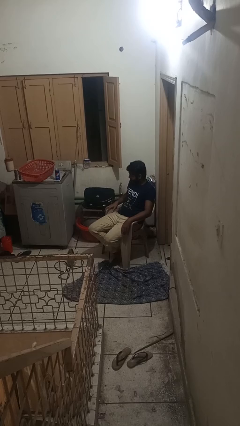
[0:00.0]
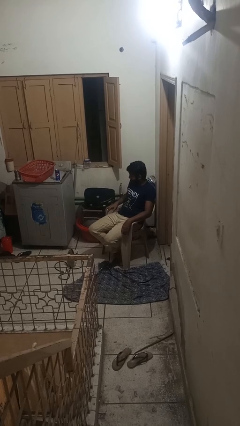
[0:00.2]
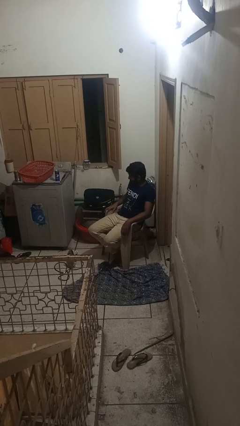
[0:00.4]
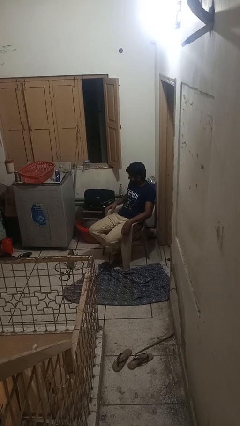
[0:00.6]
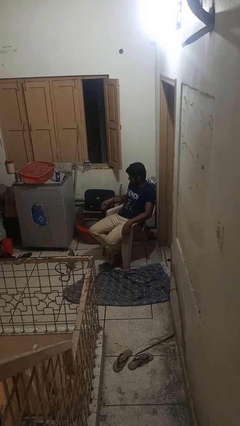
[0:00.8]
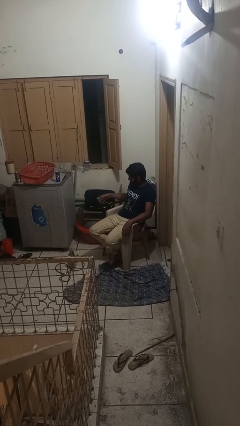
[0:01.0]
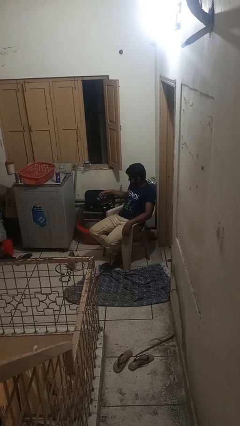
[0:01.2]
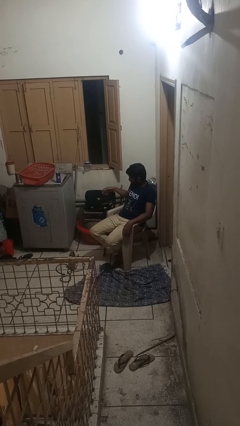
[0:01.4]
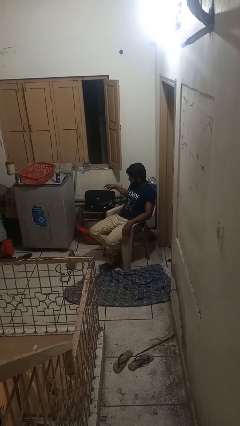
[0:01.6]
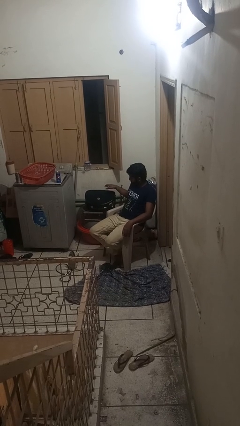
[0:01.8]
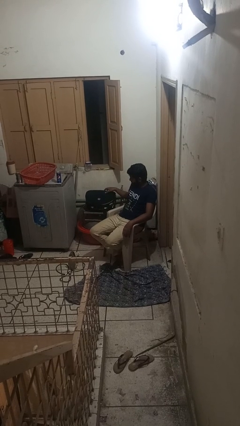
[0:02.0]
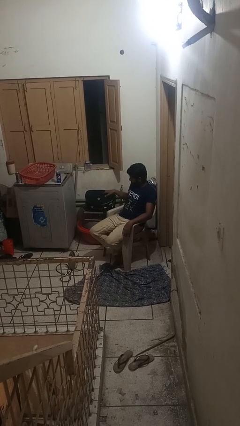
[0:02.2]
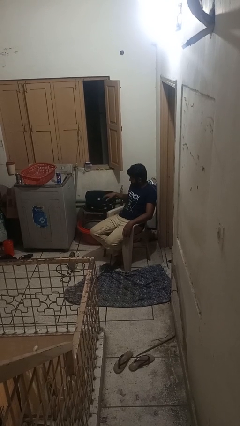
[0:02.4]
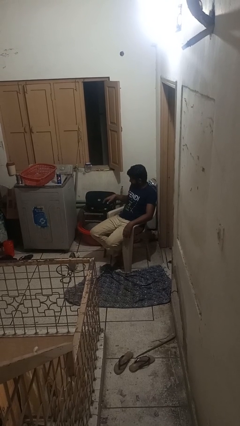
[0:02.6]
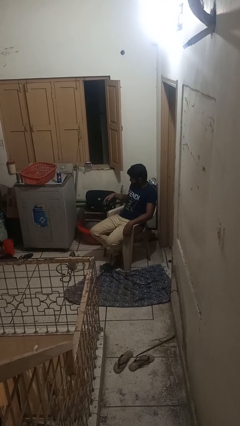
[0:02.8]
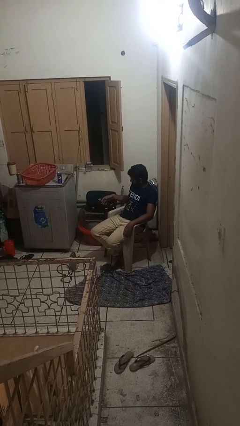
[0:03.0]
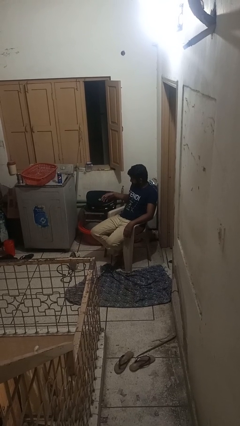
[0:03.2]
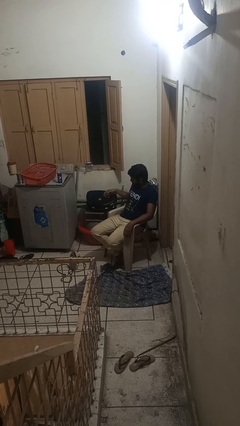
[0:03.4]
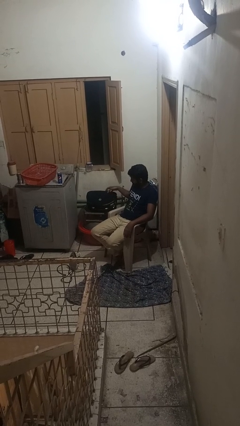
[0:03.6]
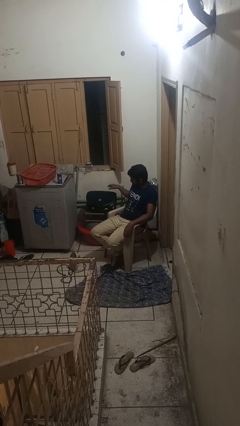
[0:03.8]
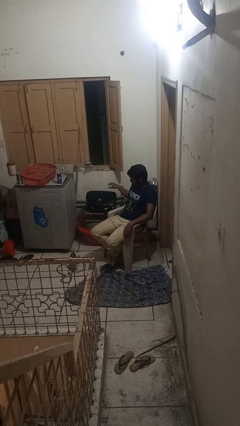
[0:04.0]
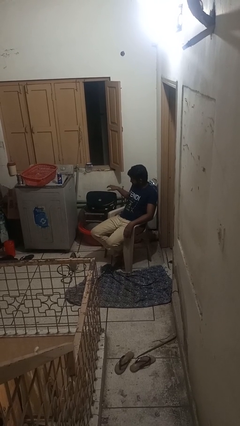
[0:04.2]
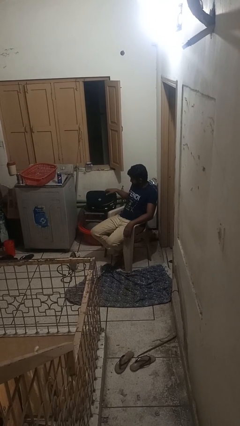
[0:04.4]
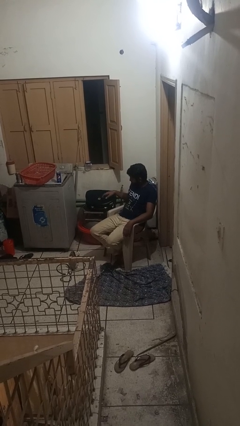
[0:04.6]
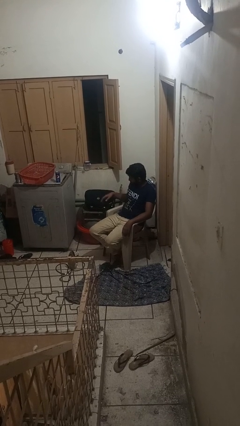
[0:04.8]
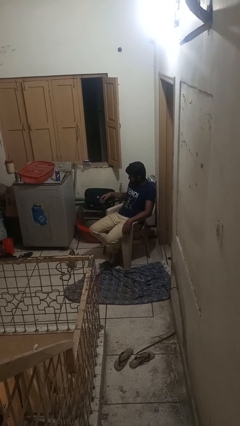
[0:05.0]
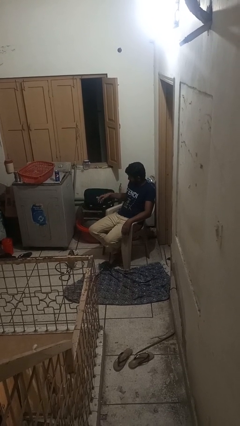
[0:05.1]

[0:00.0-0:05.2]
person waves hand over object

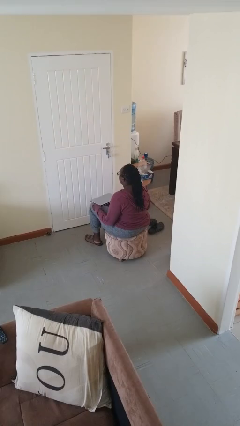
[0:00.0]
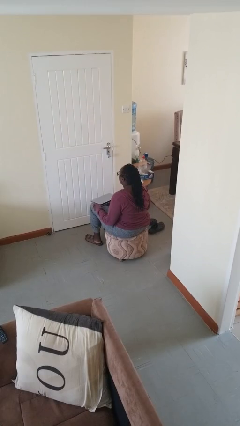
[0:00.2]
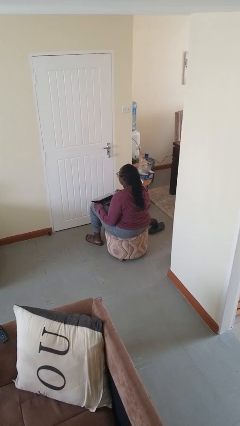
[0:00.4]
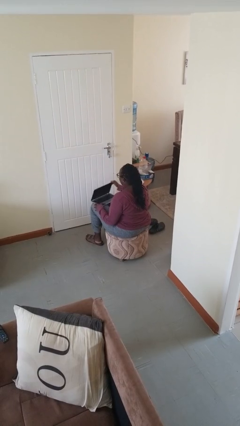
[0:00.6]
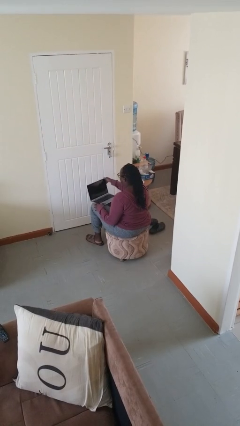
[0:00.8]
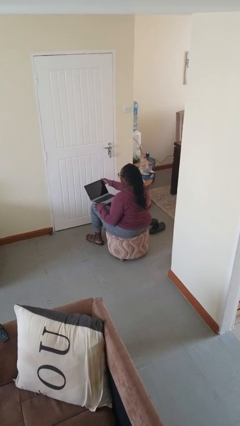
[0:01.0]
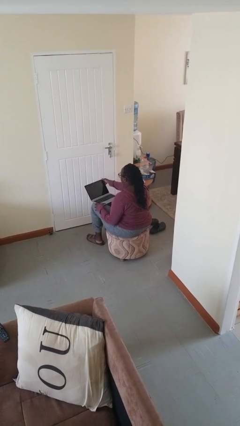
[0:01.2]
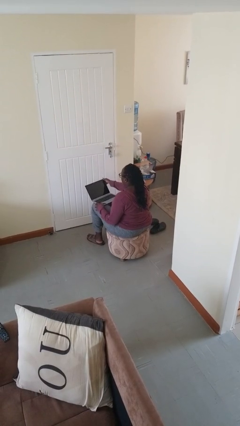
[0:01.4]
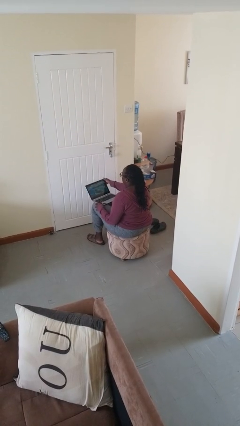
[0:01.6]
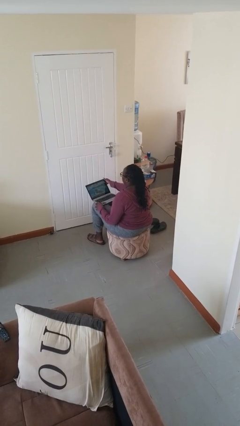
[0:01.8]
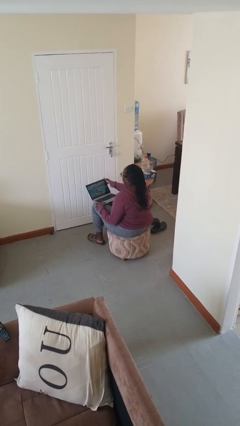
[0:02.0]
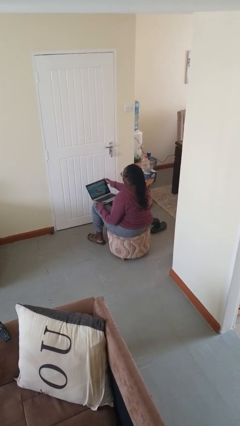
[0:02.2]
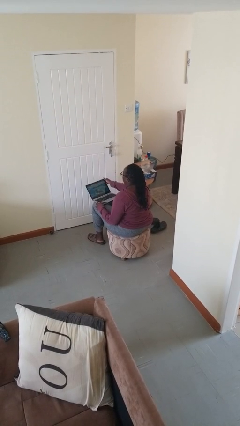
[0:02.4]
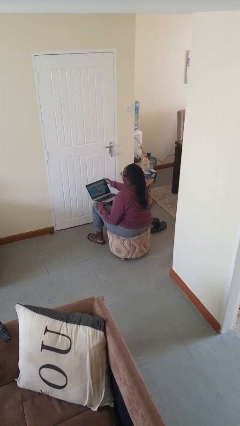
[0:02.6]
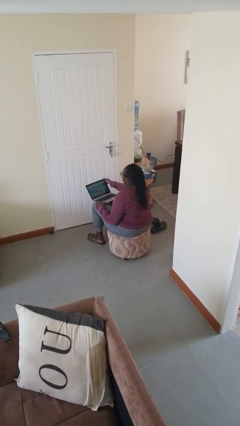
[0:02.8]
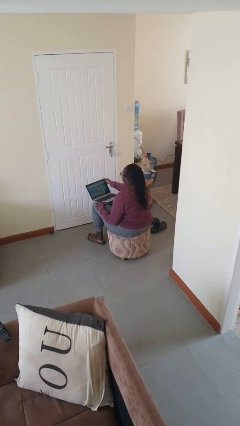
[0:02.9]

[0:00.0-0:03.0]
person opens laptop

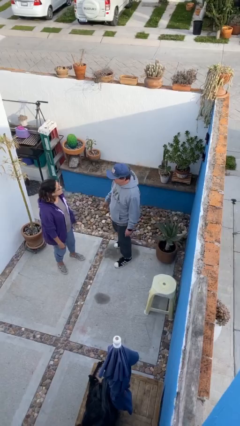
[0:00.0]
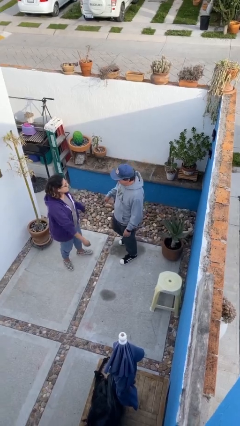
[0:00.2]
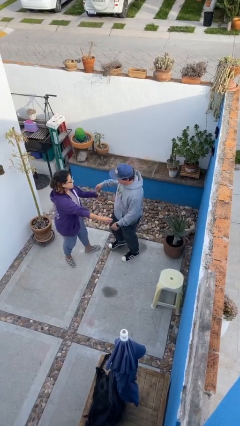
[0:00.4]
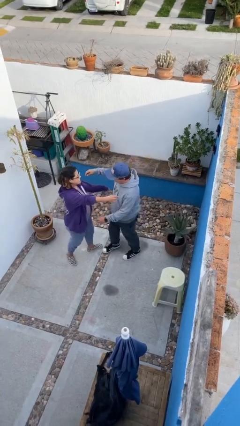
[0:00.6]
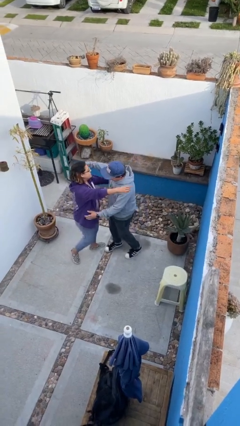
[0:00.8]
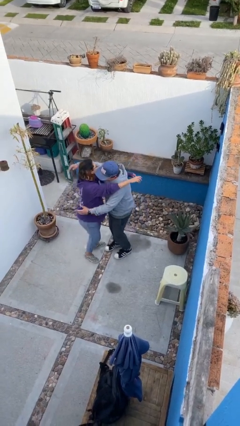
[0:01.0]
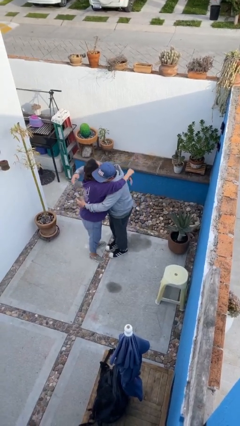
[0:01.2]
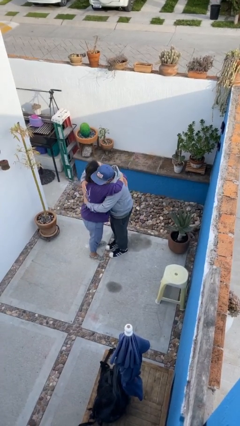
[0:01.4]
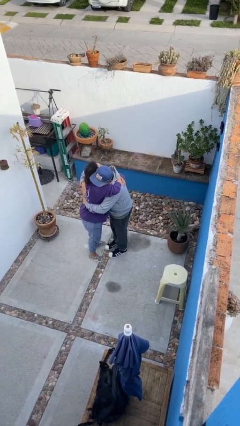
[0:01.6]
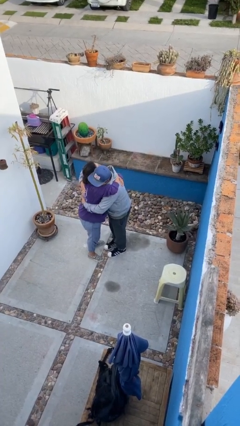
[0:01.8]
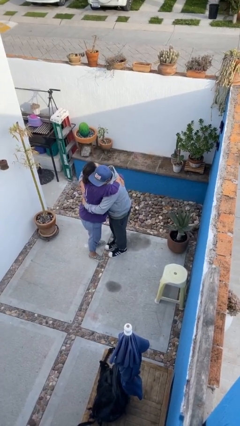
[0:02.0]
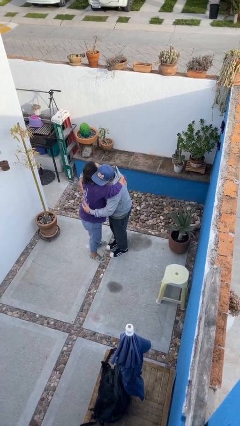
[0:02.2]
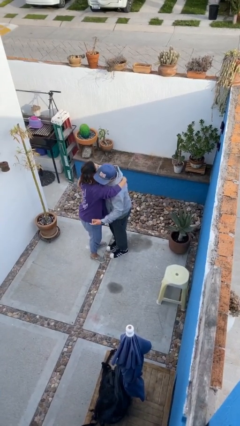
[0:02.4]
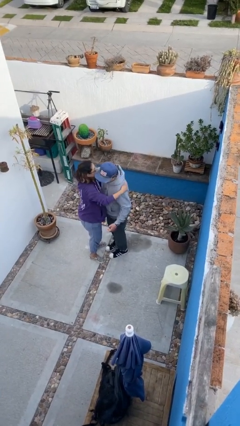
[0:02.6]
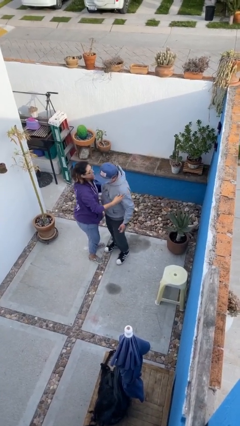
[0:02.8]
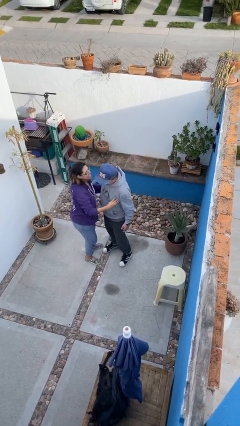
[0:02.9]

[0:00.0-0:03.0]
person embraces person

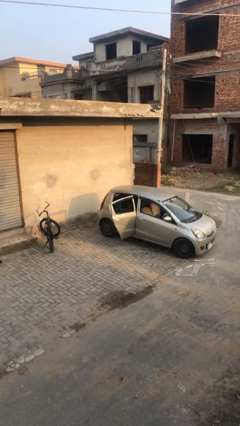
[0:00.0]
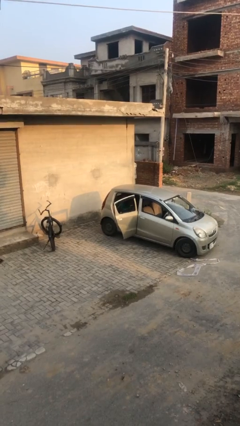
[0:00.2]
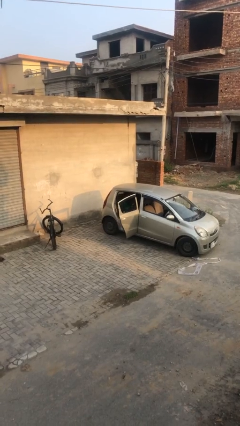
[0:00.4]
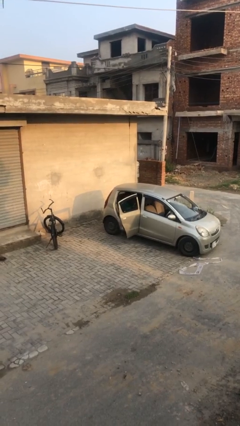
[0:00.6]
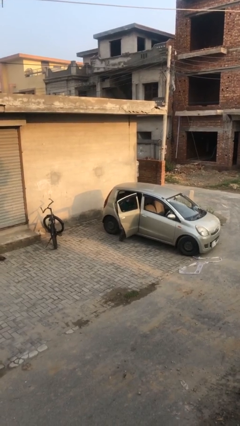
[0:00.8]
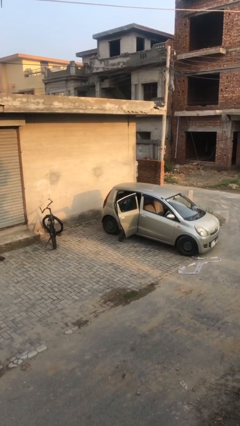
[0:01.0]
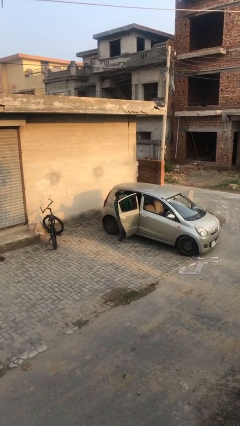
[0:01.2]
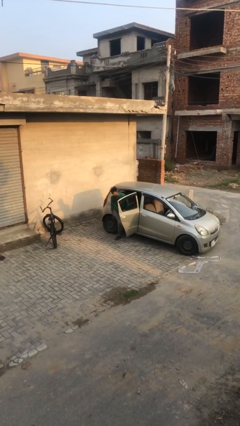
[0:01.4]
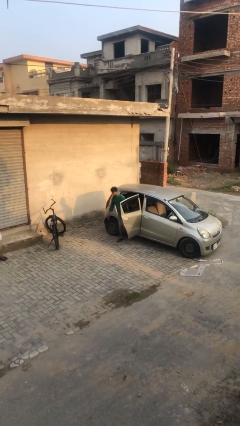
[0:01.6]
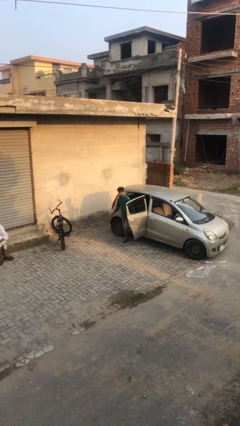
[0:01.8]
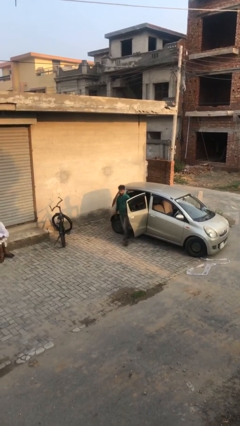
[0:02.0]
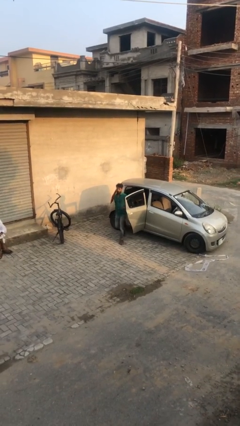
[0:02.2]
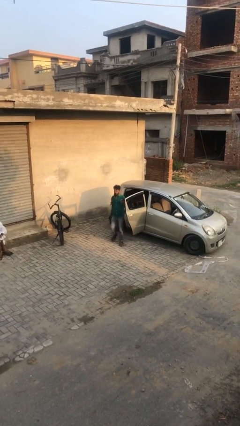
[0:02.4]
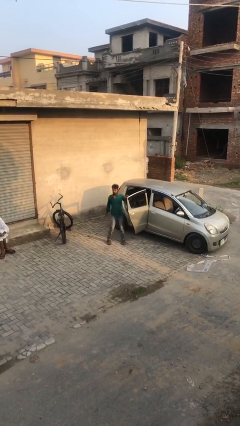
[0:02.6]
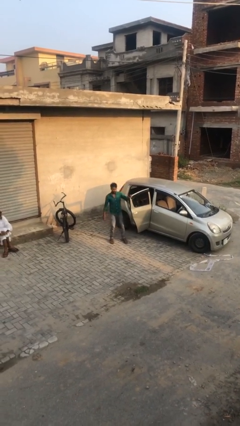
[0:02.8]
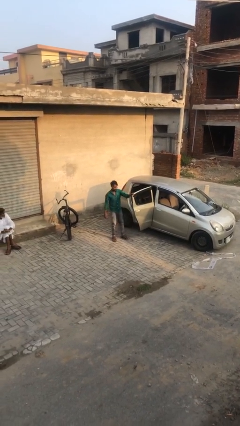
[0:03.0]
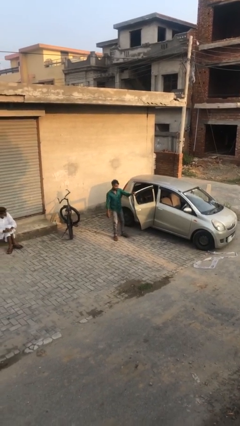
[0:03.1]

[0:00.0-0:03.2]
person exits car

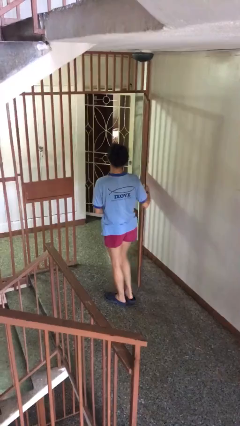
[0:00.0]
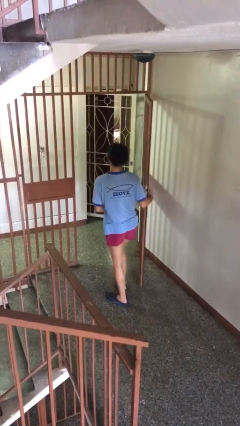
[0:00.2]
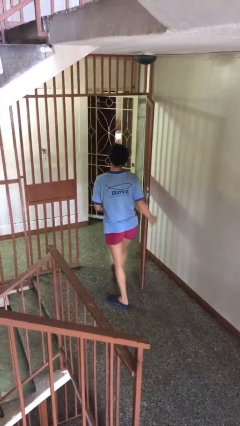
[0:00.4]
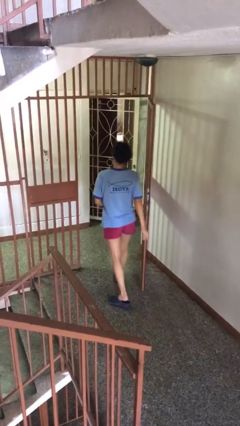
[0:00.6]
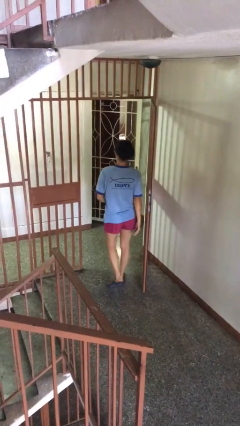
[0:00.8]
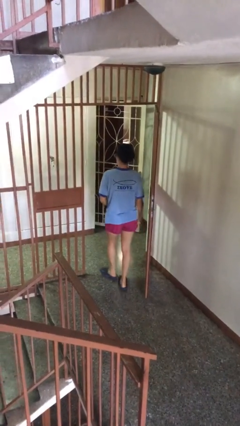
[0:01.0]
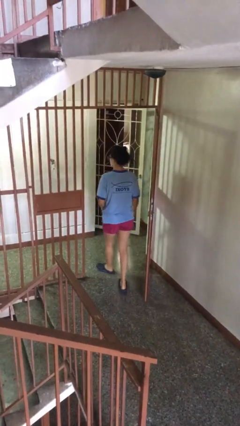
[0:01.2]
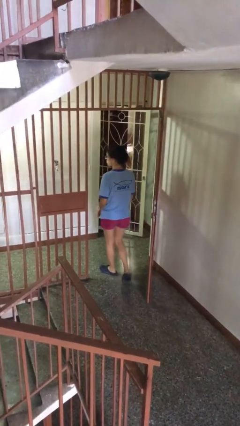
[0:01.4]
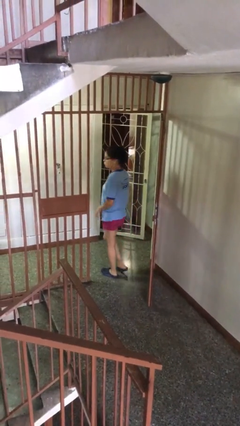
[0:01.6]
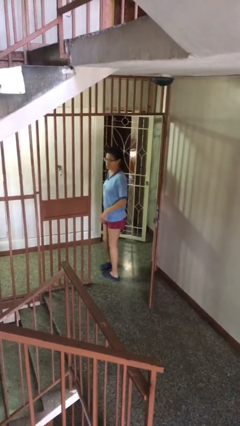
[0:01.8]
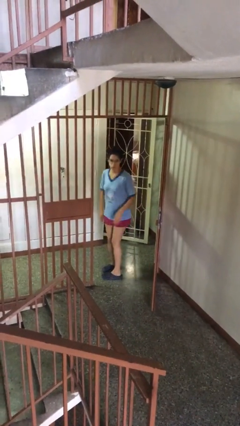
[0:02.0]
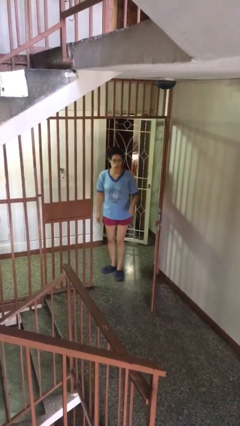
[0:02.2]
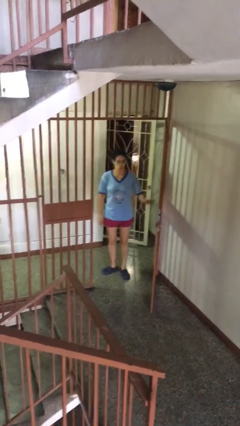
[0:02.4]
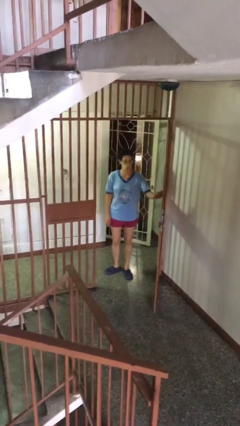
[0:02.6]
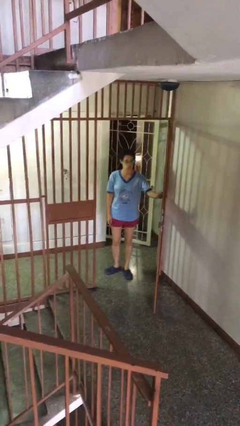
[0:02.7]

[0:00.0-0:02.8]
person exits scene through structure

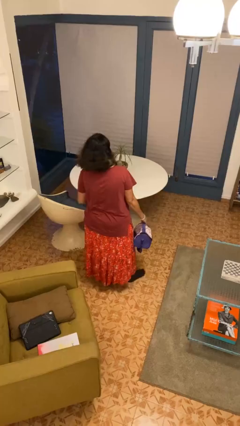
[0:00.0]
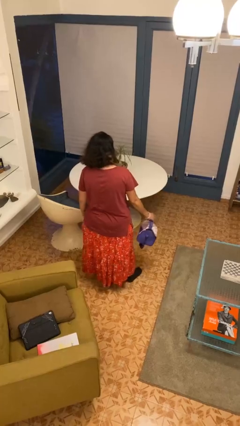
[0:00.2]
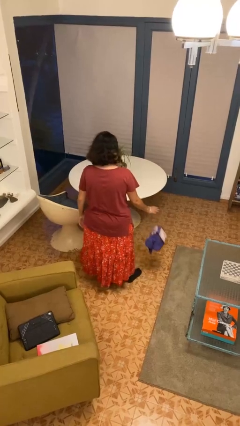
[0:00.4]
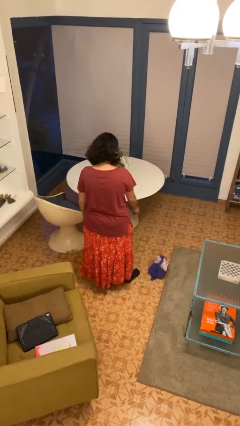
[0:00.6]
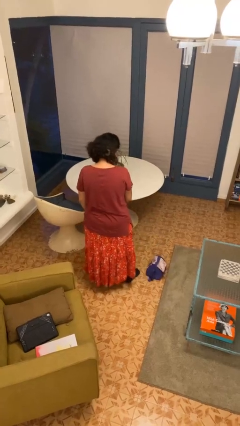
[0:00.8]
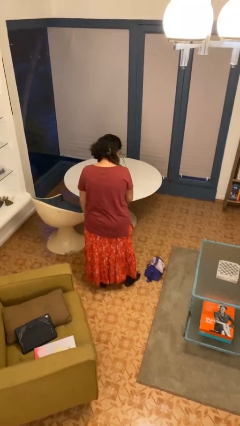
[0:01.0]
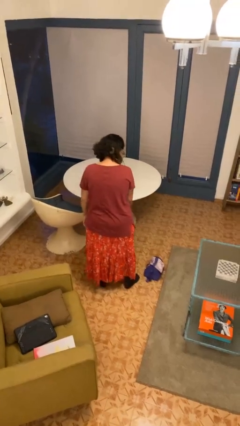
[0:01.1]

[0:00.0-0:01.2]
person drops object
